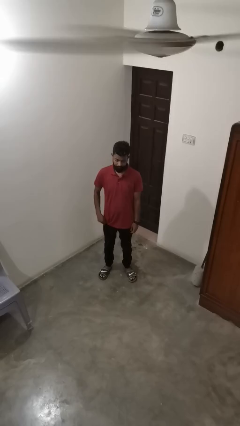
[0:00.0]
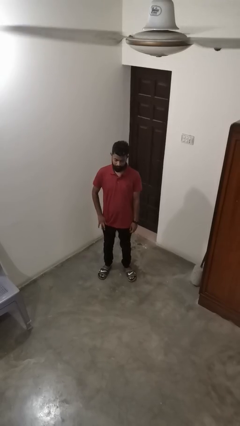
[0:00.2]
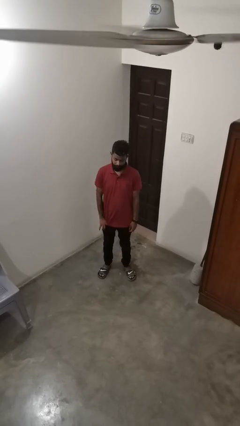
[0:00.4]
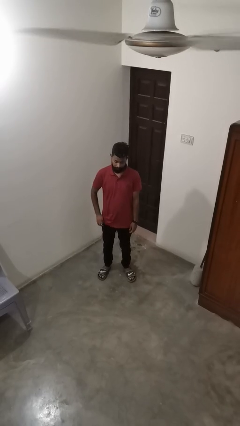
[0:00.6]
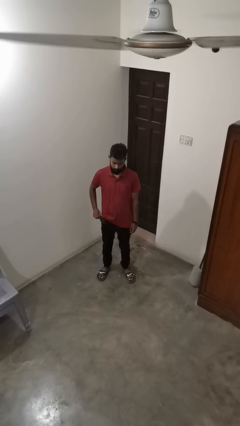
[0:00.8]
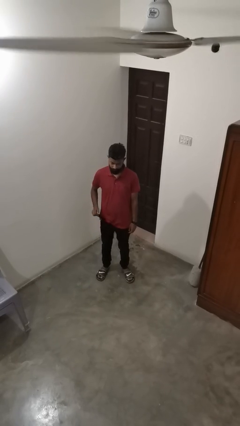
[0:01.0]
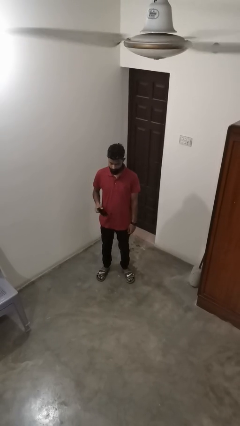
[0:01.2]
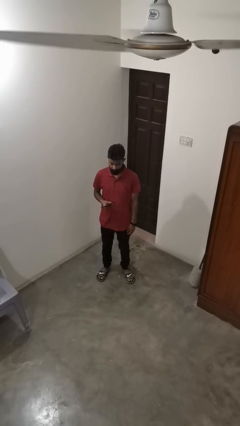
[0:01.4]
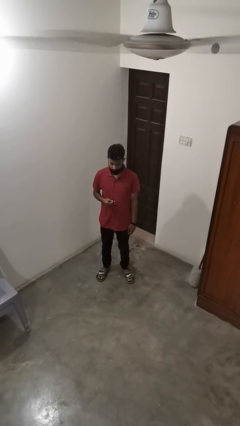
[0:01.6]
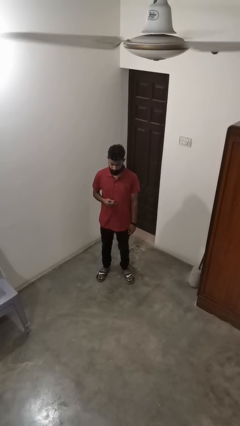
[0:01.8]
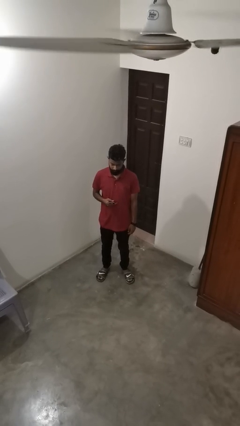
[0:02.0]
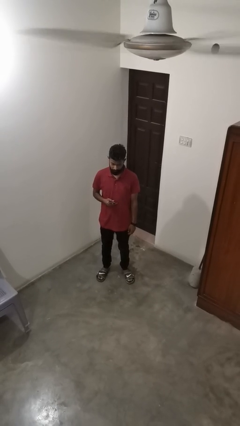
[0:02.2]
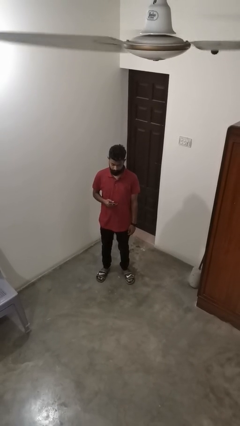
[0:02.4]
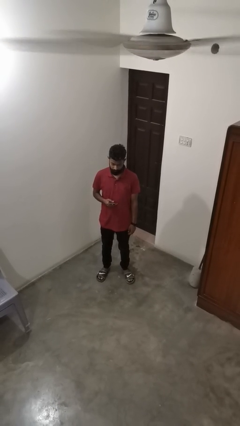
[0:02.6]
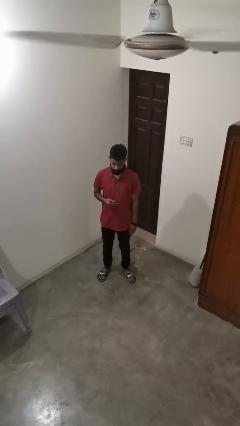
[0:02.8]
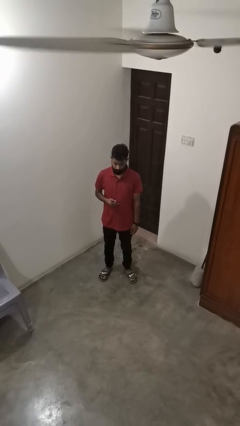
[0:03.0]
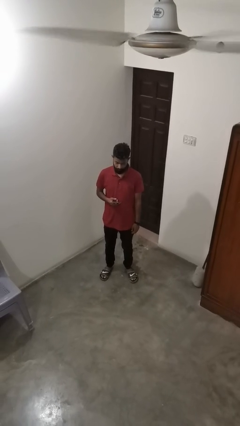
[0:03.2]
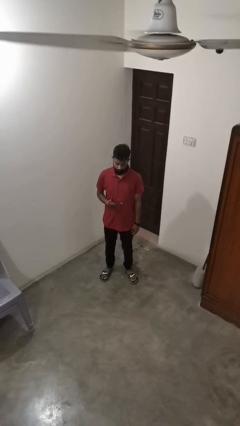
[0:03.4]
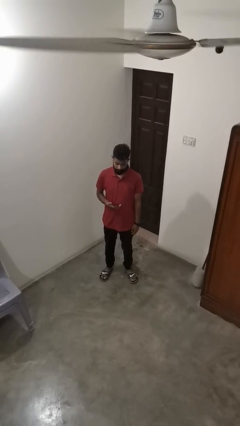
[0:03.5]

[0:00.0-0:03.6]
person takes phone from pocket

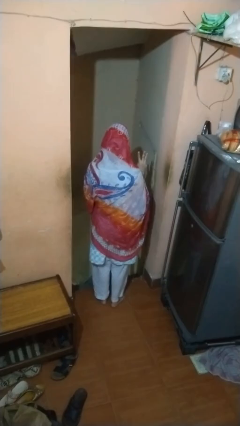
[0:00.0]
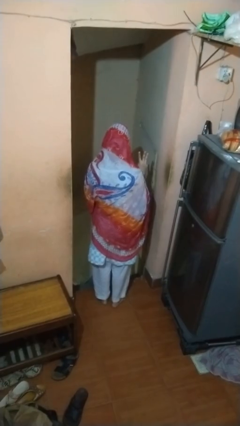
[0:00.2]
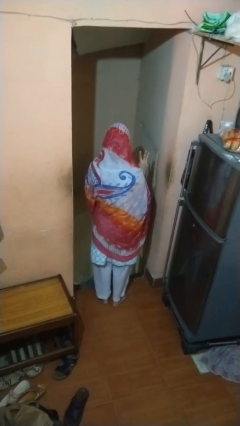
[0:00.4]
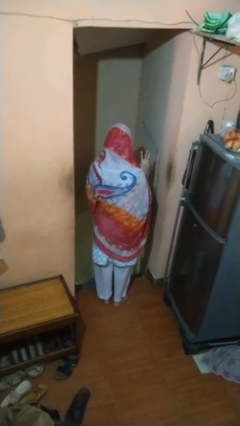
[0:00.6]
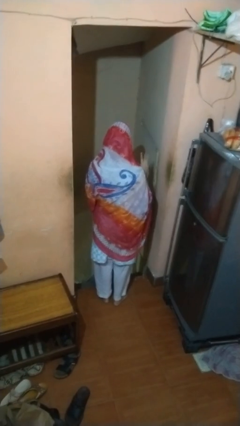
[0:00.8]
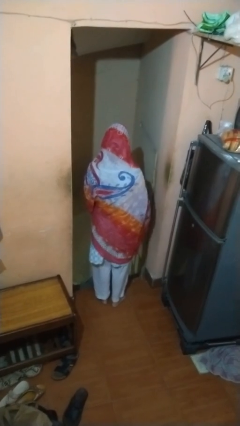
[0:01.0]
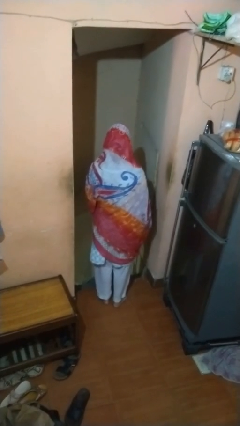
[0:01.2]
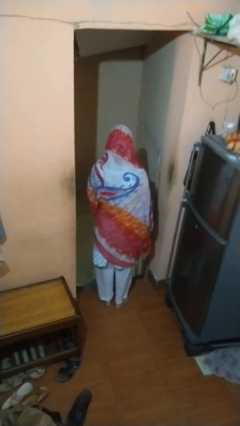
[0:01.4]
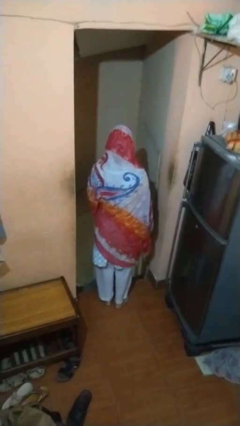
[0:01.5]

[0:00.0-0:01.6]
person gestures number three

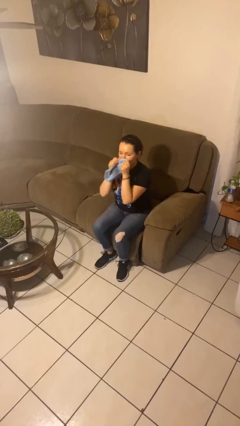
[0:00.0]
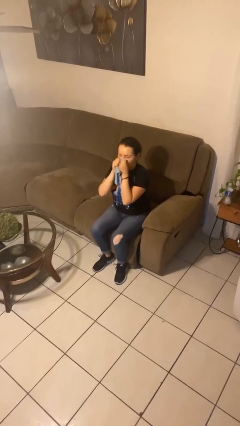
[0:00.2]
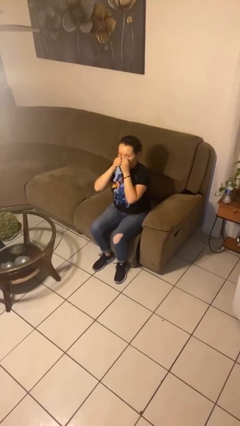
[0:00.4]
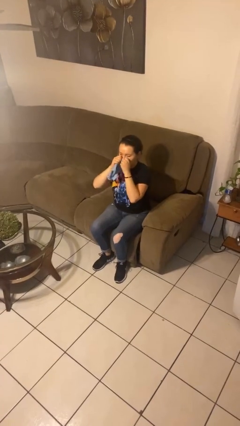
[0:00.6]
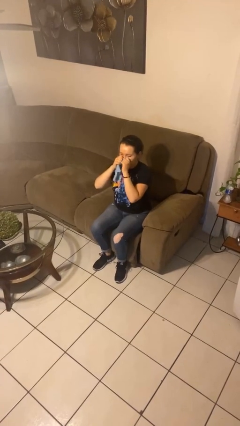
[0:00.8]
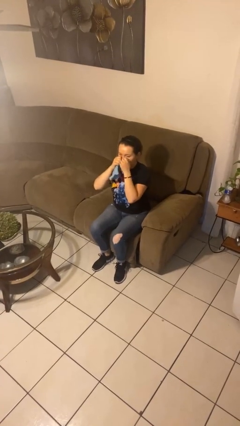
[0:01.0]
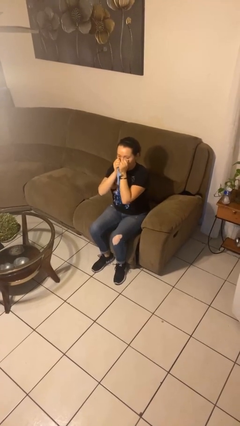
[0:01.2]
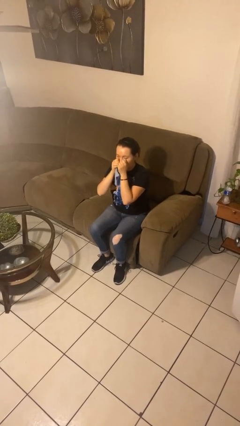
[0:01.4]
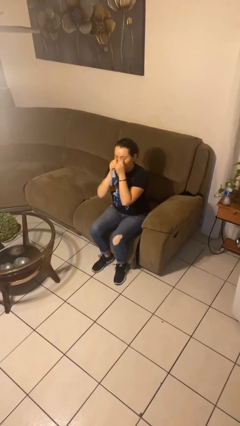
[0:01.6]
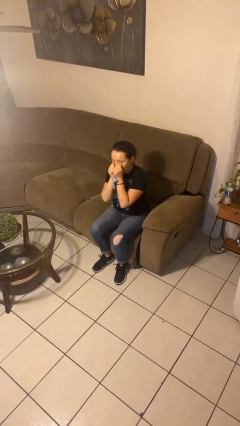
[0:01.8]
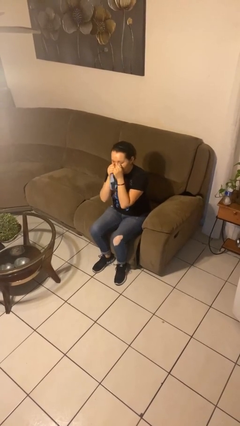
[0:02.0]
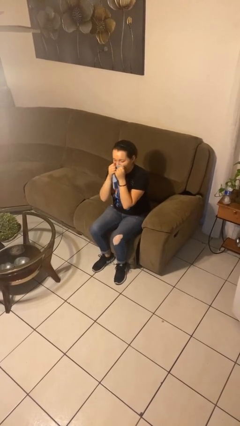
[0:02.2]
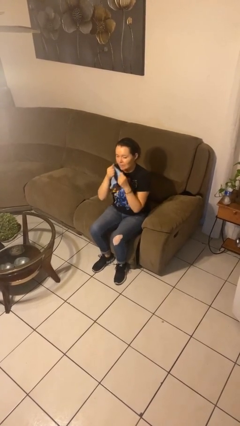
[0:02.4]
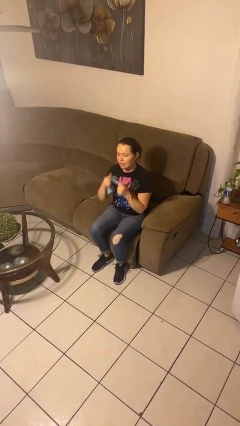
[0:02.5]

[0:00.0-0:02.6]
person blows nose

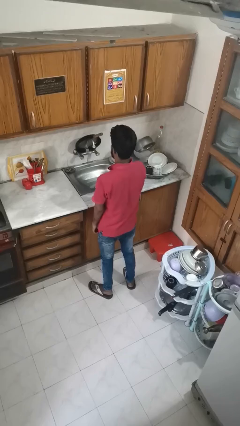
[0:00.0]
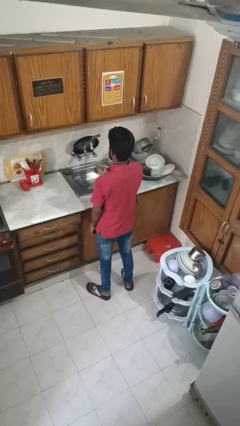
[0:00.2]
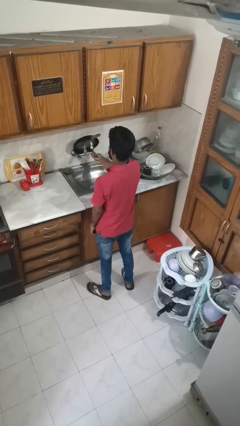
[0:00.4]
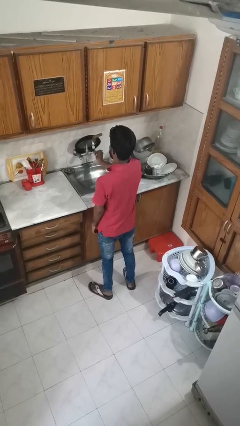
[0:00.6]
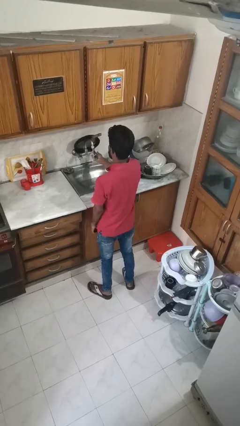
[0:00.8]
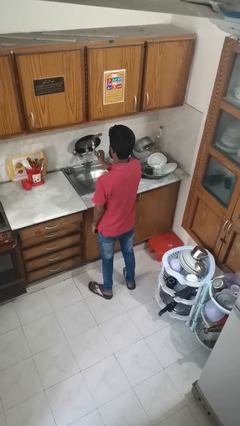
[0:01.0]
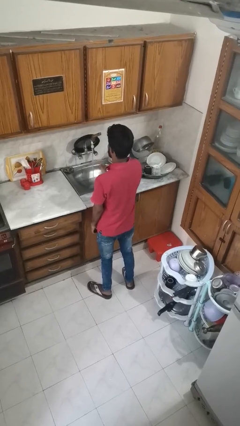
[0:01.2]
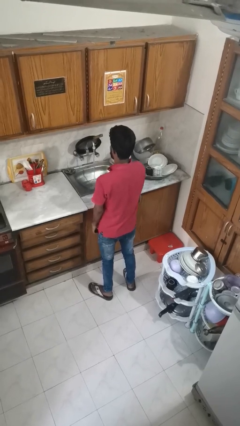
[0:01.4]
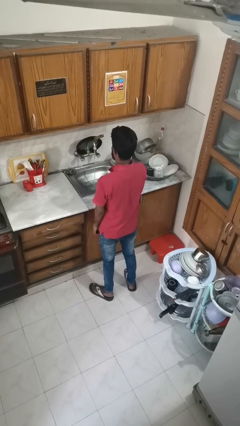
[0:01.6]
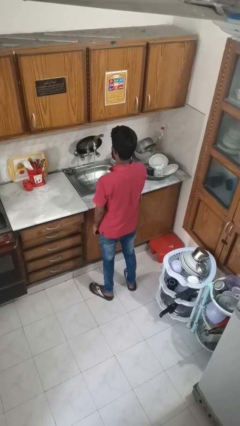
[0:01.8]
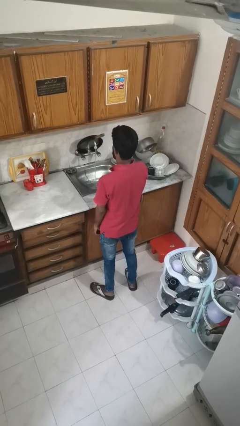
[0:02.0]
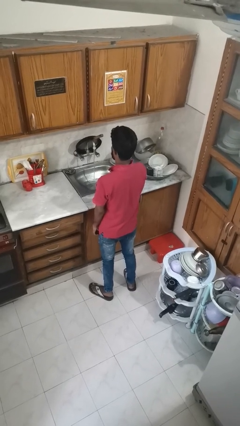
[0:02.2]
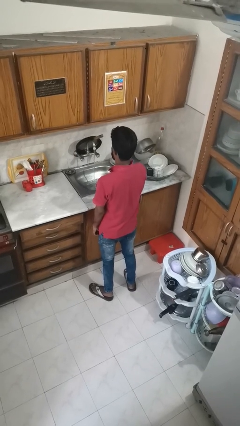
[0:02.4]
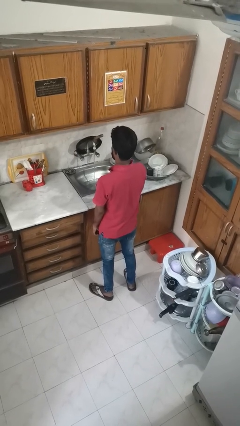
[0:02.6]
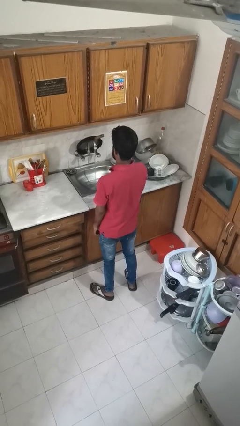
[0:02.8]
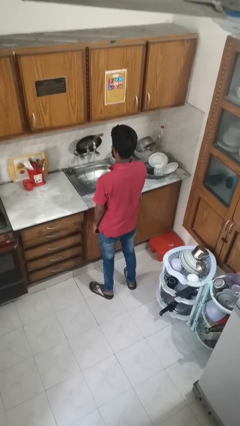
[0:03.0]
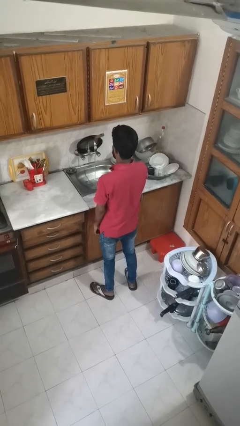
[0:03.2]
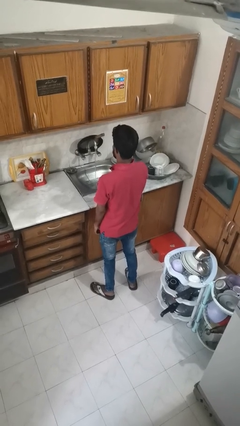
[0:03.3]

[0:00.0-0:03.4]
person turns on faucet

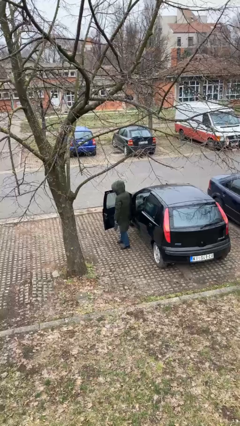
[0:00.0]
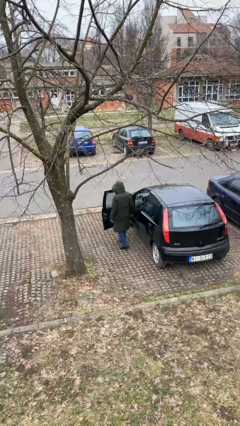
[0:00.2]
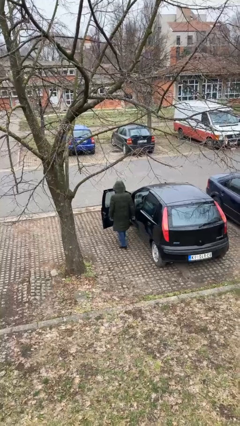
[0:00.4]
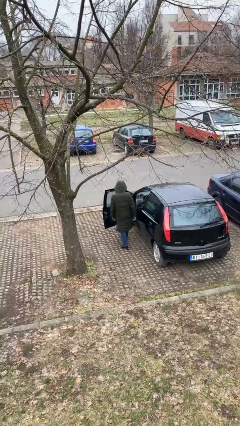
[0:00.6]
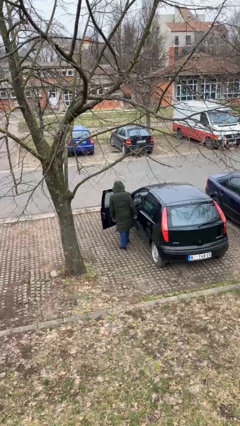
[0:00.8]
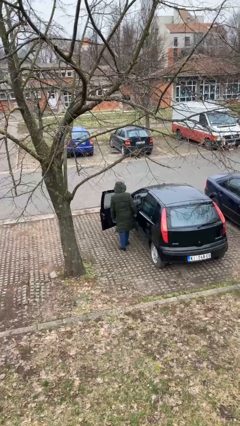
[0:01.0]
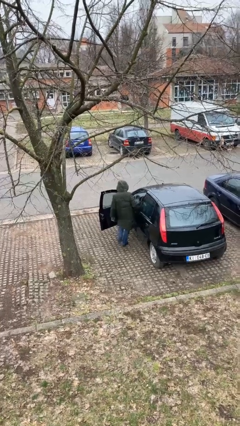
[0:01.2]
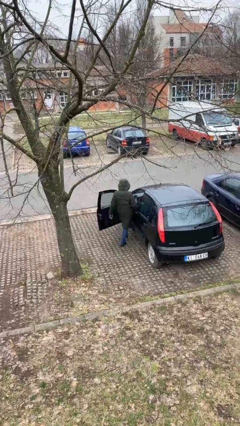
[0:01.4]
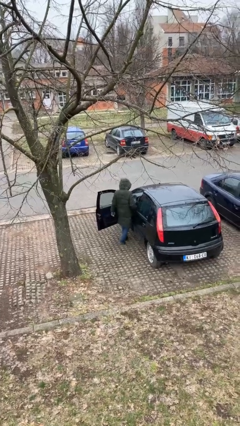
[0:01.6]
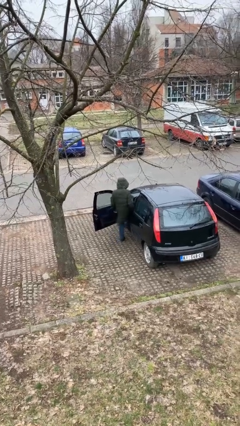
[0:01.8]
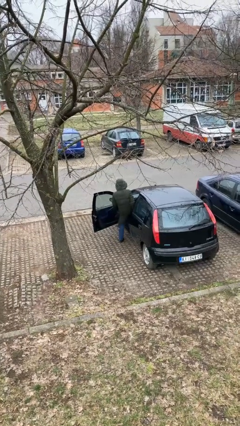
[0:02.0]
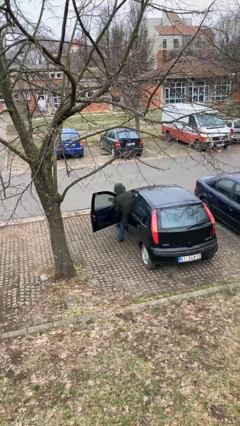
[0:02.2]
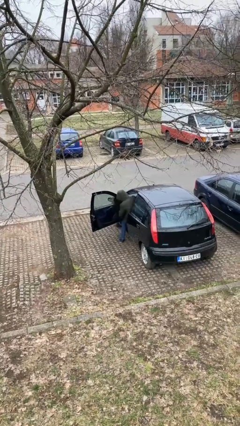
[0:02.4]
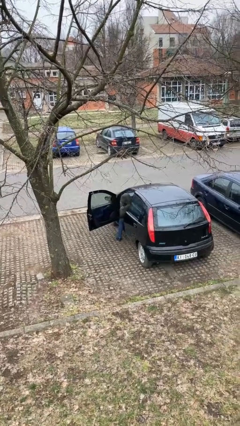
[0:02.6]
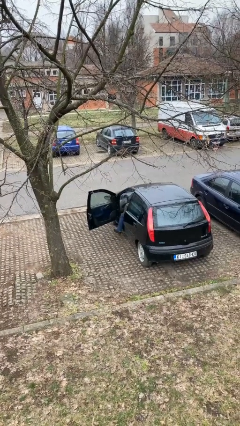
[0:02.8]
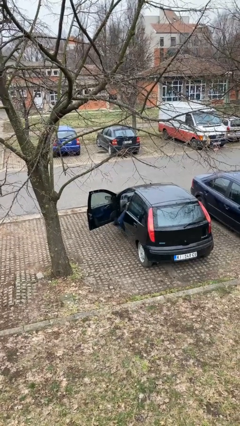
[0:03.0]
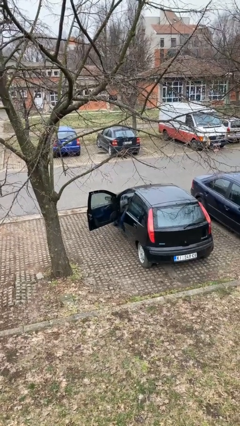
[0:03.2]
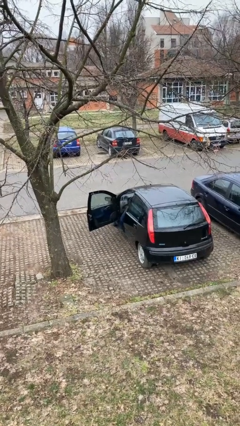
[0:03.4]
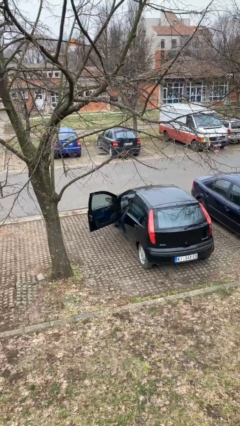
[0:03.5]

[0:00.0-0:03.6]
person enters car

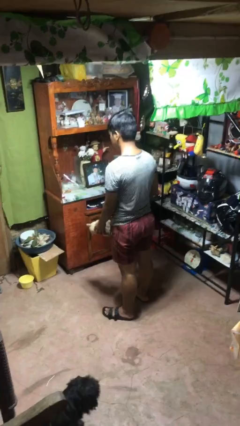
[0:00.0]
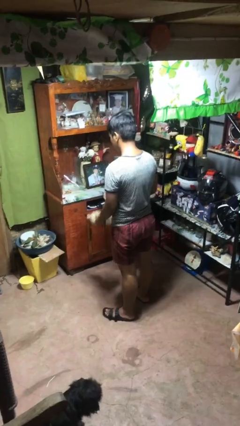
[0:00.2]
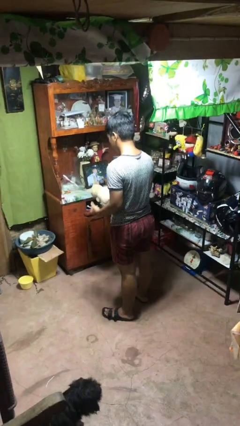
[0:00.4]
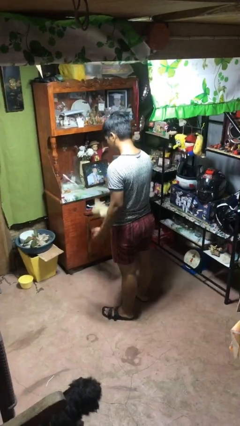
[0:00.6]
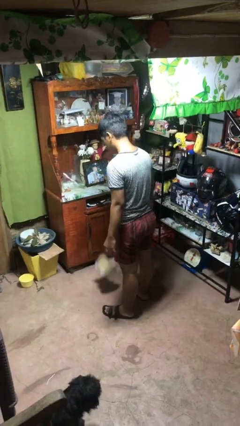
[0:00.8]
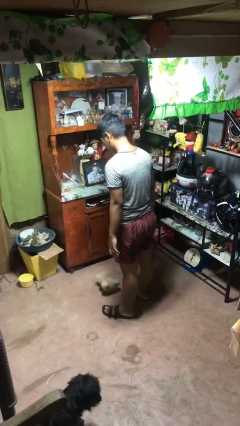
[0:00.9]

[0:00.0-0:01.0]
person drops object

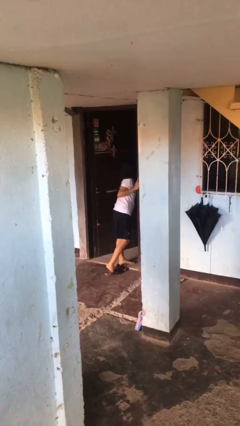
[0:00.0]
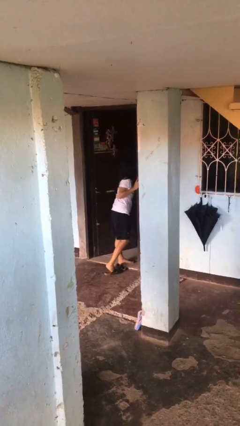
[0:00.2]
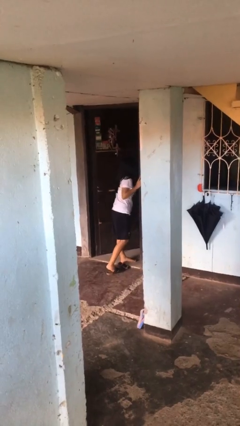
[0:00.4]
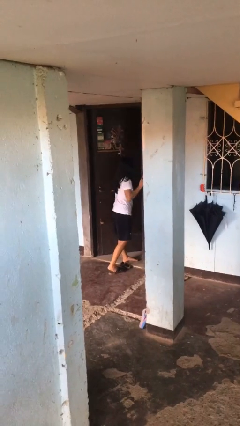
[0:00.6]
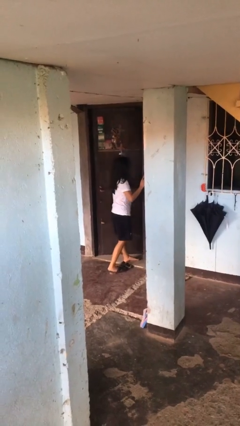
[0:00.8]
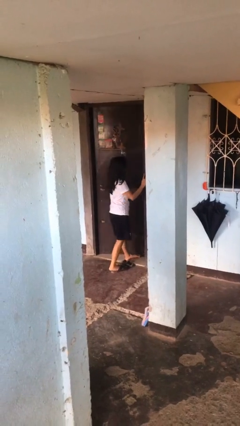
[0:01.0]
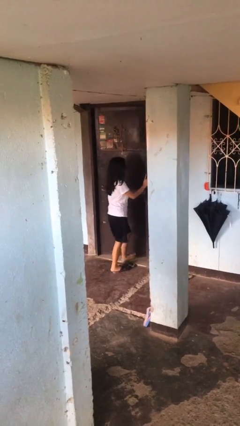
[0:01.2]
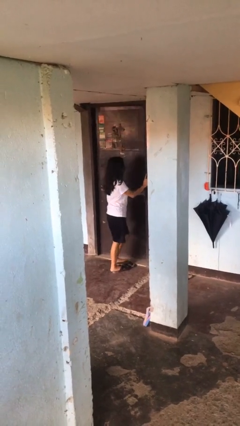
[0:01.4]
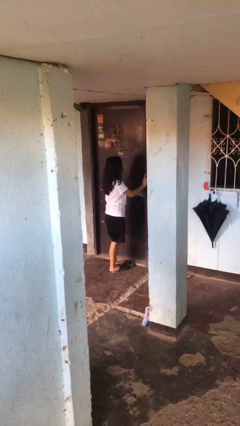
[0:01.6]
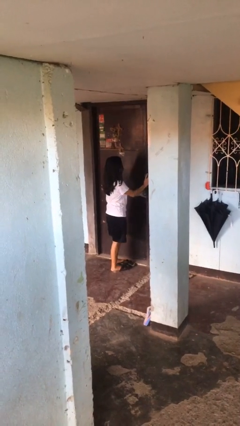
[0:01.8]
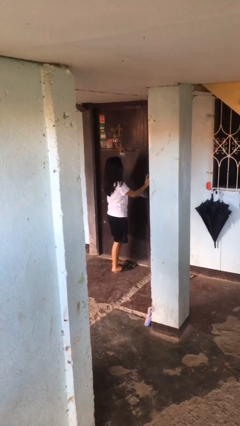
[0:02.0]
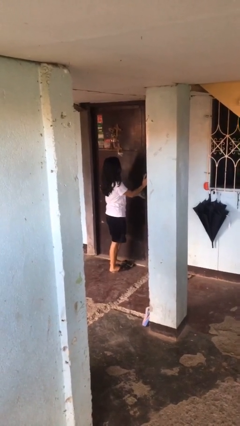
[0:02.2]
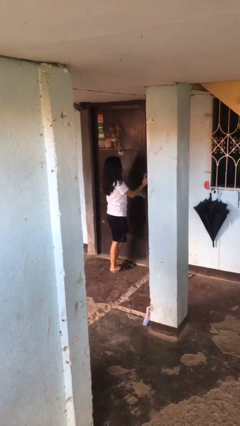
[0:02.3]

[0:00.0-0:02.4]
person closes facility door
